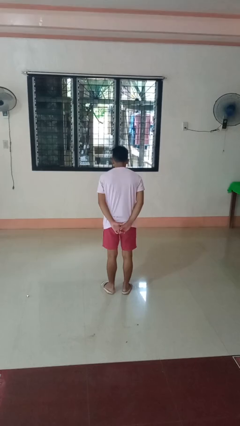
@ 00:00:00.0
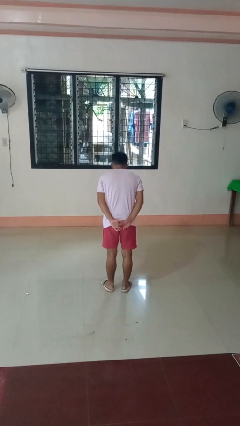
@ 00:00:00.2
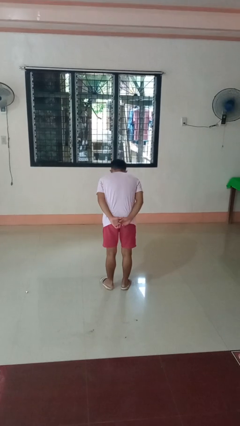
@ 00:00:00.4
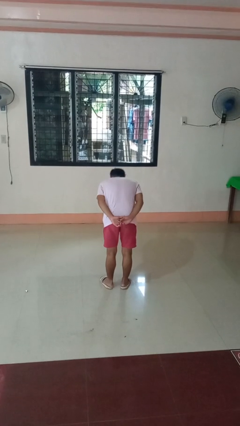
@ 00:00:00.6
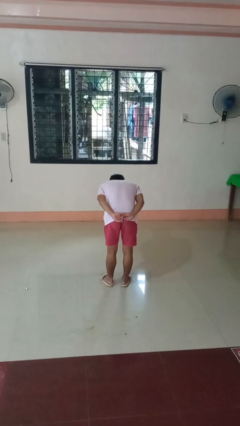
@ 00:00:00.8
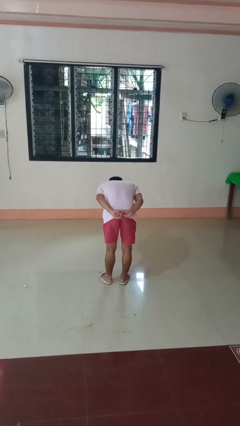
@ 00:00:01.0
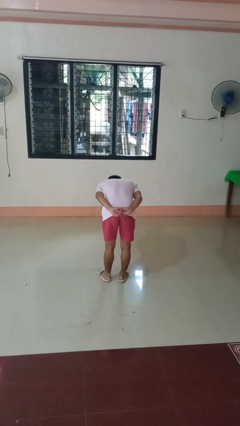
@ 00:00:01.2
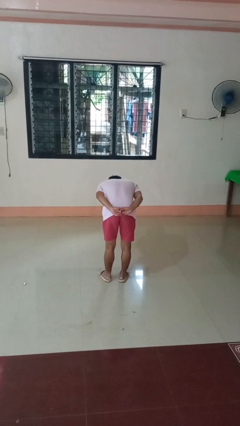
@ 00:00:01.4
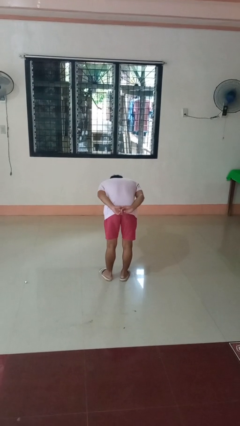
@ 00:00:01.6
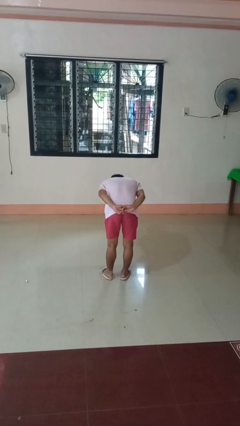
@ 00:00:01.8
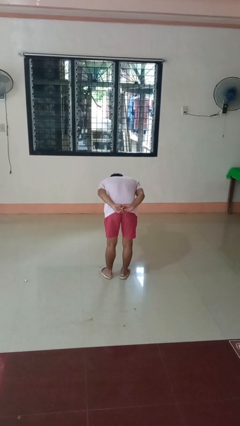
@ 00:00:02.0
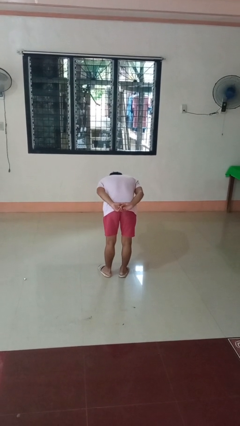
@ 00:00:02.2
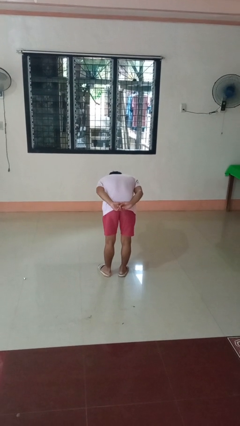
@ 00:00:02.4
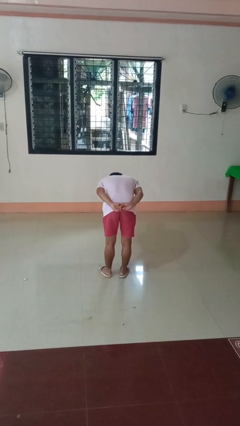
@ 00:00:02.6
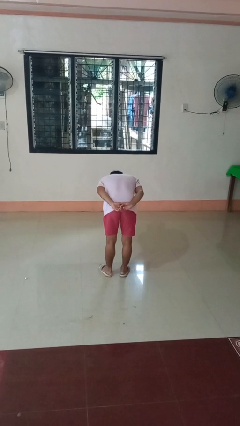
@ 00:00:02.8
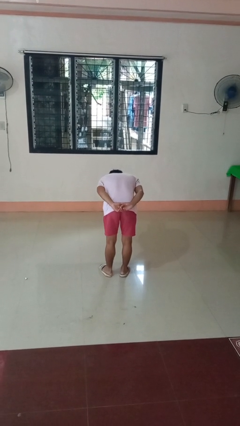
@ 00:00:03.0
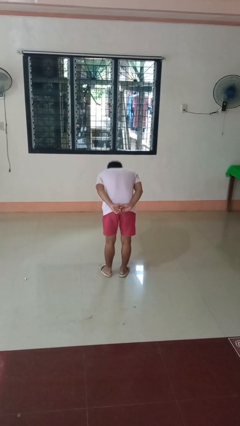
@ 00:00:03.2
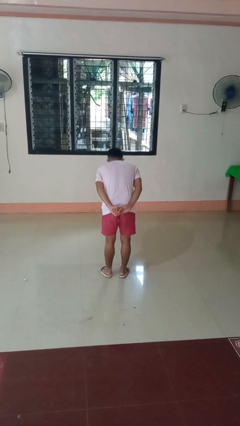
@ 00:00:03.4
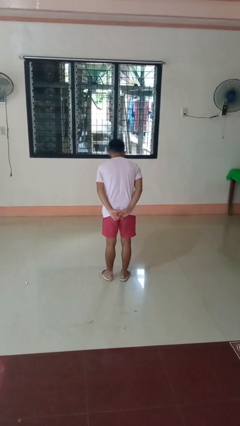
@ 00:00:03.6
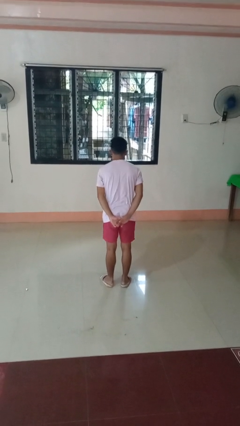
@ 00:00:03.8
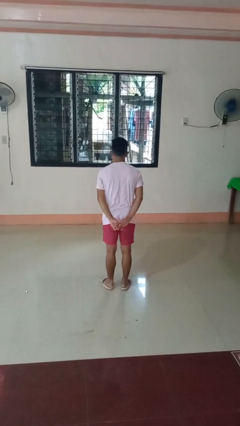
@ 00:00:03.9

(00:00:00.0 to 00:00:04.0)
person bows

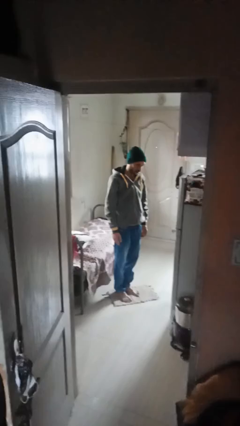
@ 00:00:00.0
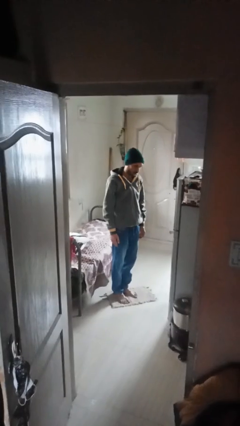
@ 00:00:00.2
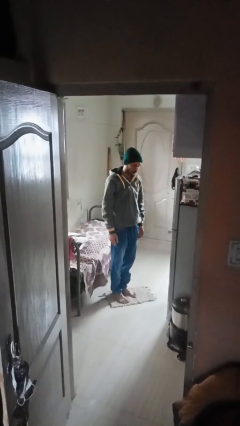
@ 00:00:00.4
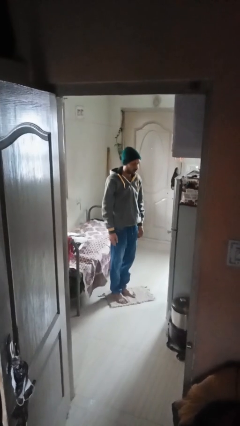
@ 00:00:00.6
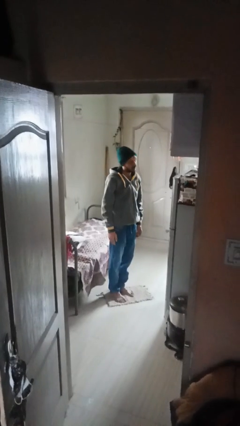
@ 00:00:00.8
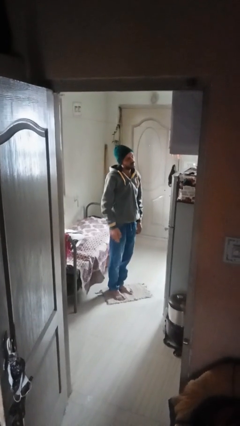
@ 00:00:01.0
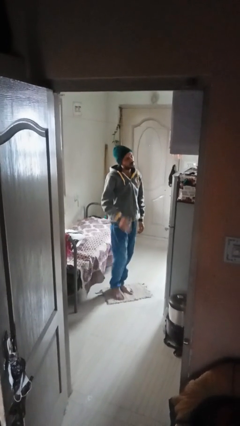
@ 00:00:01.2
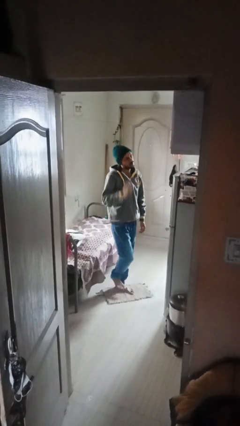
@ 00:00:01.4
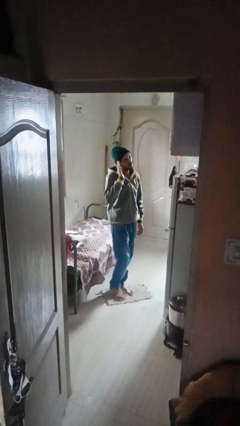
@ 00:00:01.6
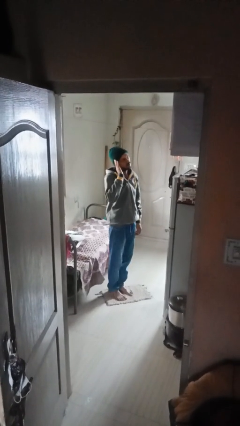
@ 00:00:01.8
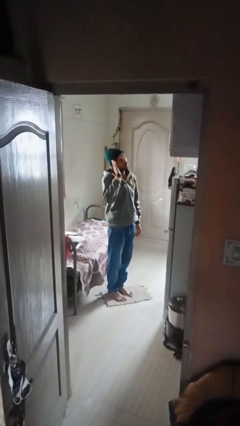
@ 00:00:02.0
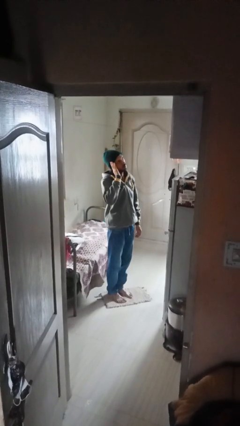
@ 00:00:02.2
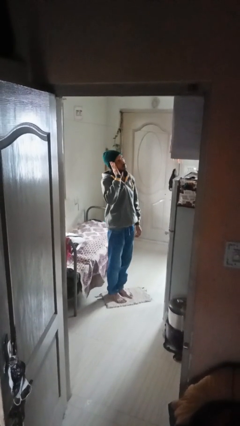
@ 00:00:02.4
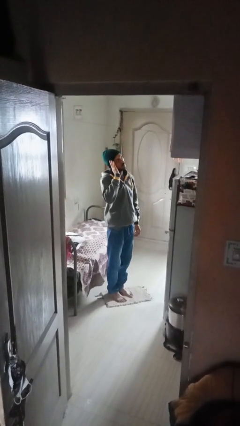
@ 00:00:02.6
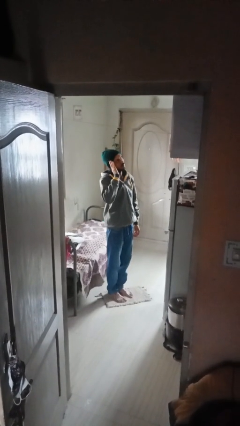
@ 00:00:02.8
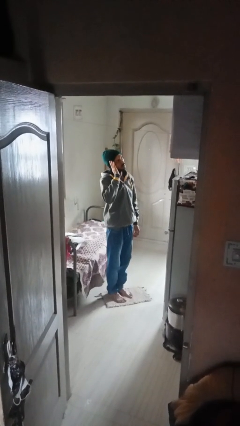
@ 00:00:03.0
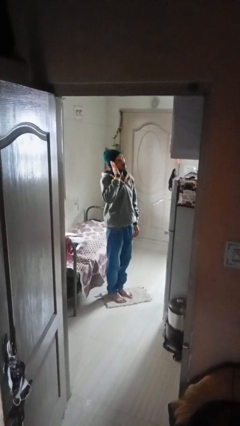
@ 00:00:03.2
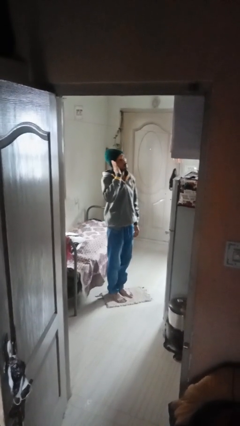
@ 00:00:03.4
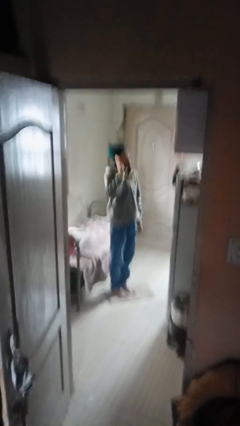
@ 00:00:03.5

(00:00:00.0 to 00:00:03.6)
person salutes

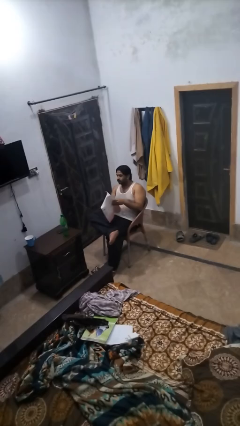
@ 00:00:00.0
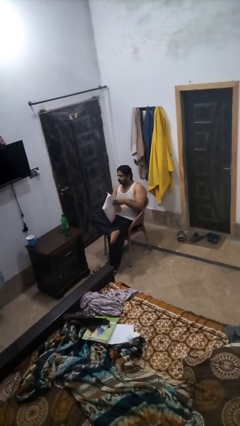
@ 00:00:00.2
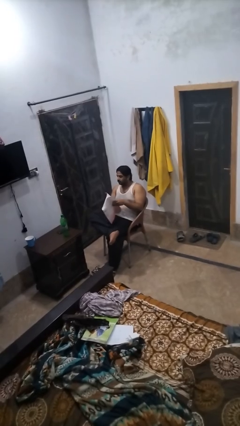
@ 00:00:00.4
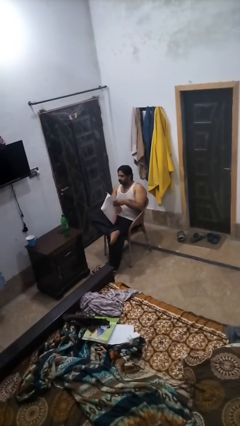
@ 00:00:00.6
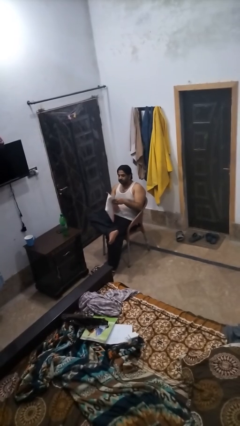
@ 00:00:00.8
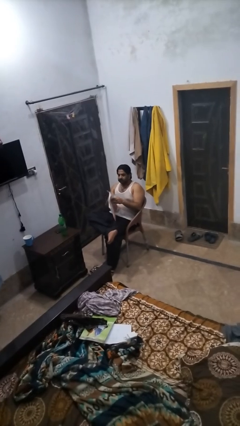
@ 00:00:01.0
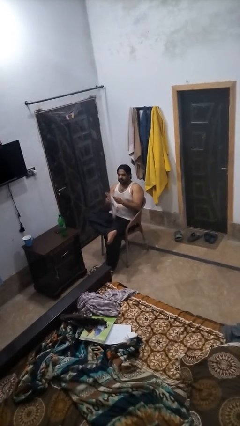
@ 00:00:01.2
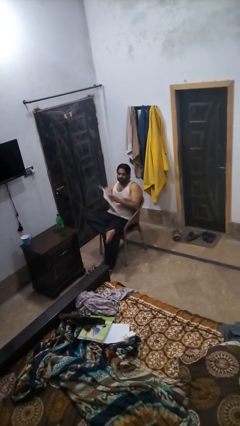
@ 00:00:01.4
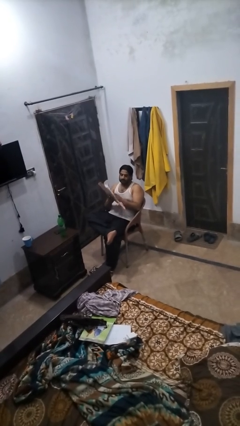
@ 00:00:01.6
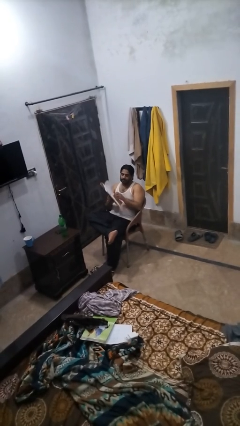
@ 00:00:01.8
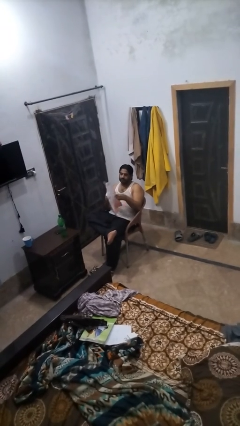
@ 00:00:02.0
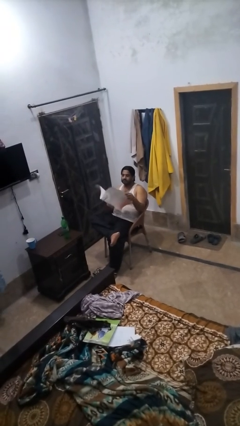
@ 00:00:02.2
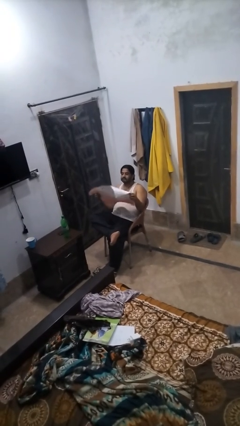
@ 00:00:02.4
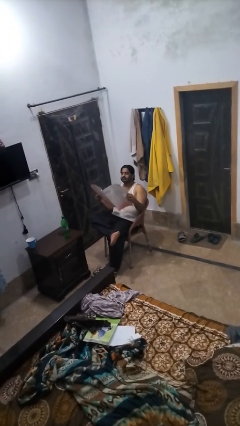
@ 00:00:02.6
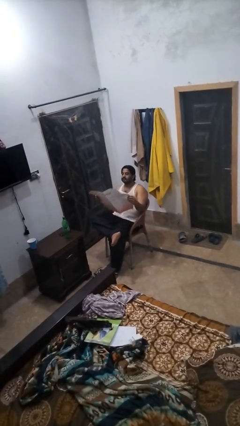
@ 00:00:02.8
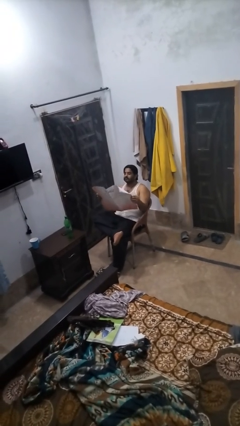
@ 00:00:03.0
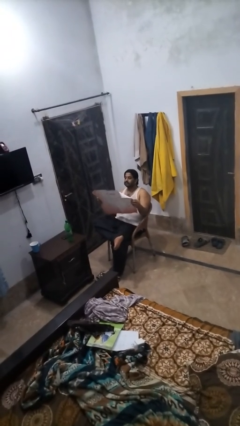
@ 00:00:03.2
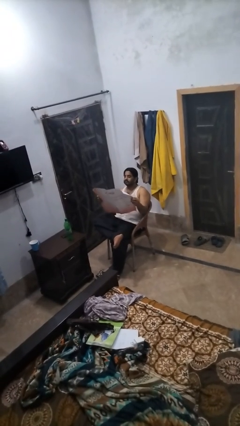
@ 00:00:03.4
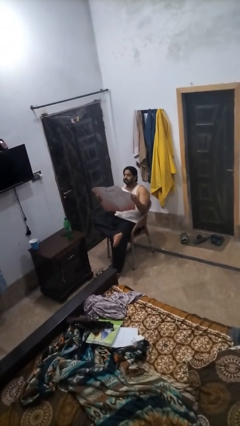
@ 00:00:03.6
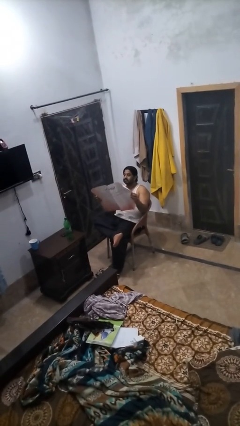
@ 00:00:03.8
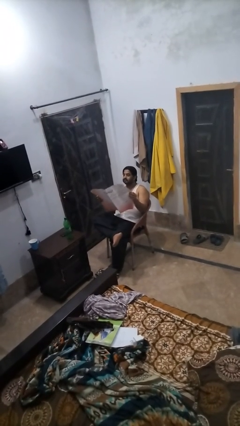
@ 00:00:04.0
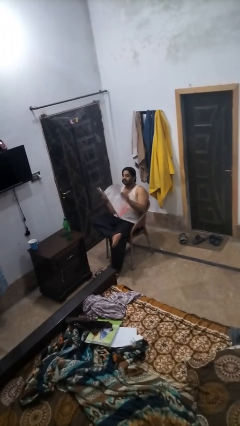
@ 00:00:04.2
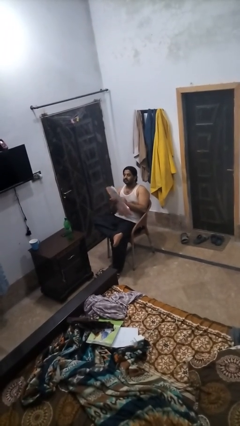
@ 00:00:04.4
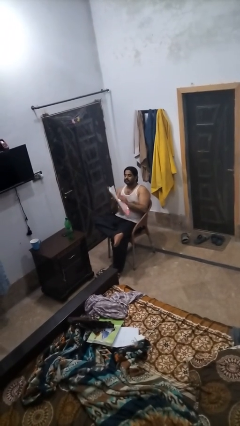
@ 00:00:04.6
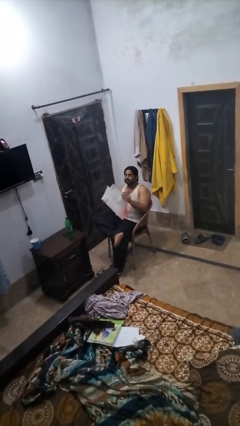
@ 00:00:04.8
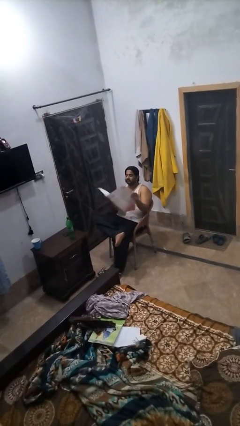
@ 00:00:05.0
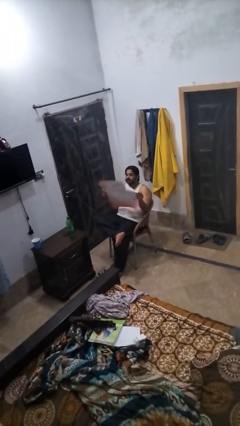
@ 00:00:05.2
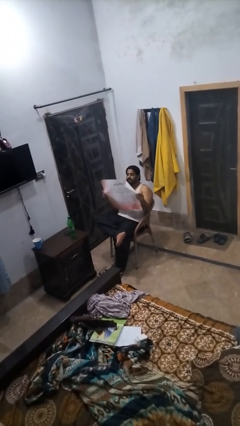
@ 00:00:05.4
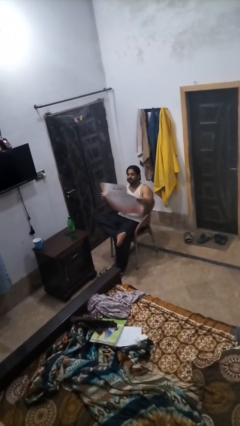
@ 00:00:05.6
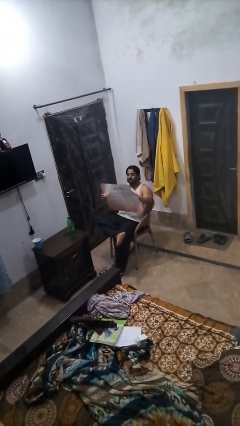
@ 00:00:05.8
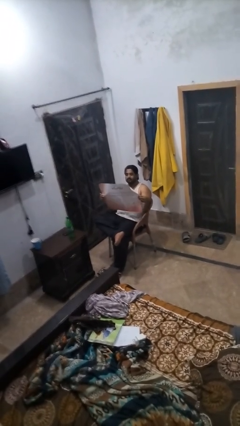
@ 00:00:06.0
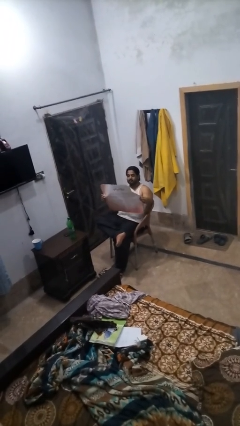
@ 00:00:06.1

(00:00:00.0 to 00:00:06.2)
person reads newspaper

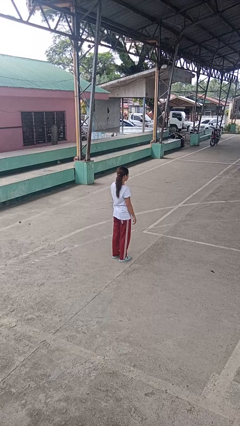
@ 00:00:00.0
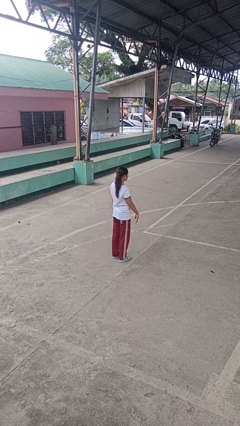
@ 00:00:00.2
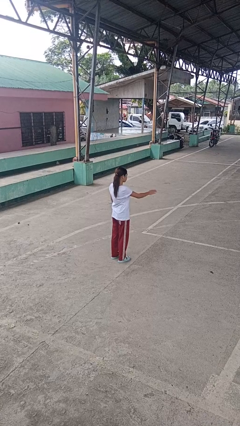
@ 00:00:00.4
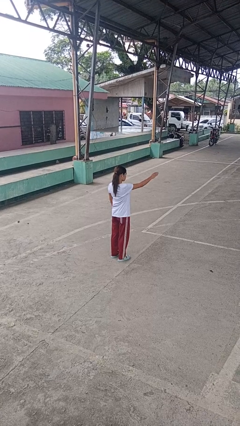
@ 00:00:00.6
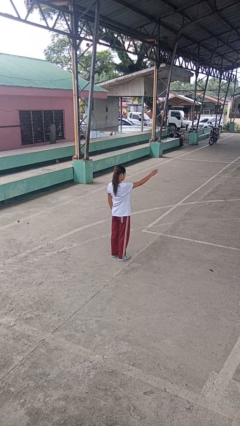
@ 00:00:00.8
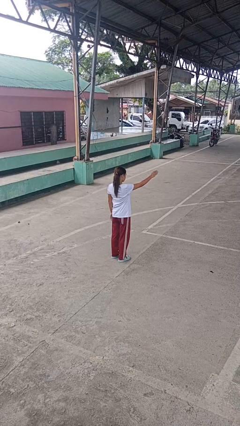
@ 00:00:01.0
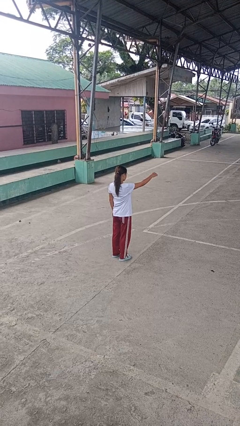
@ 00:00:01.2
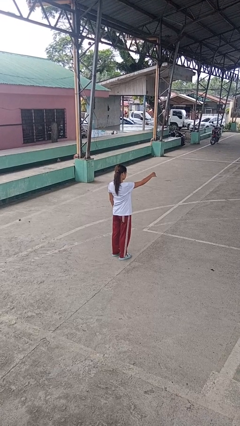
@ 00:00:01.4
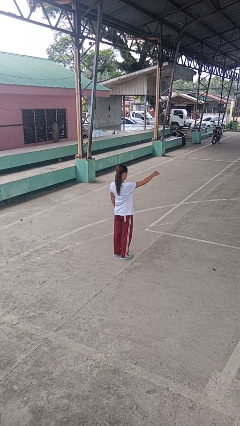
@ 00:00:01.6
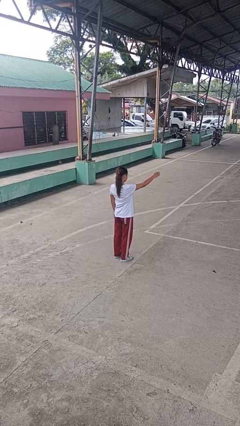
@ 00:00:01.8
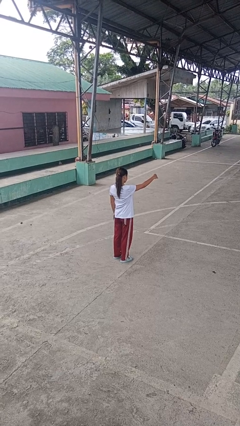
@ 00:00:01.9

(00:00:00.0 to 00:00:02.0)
person gestures come here

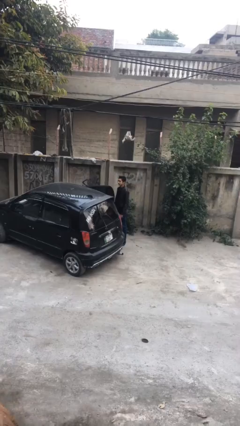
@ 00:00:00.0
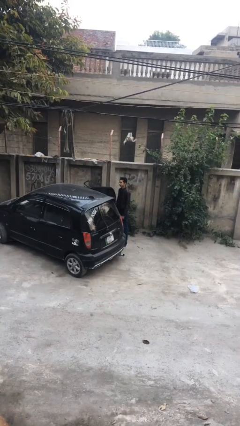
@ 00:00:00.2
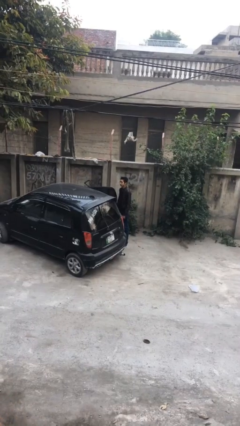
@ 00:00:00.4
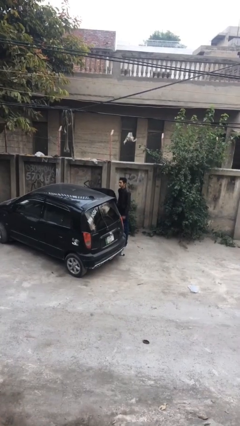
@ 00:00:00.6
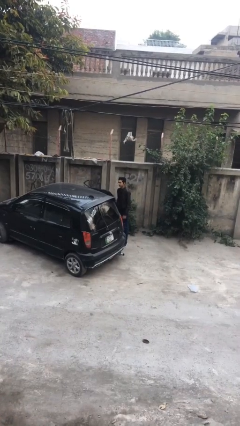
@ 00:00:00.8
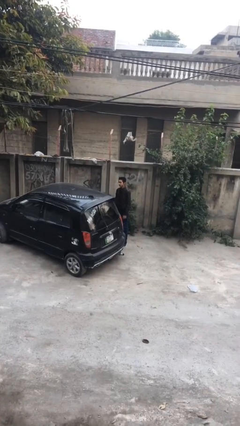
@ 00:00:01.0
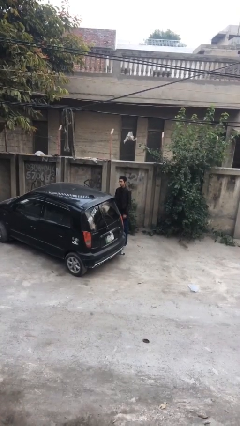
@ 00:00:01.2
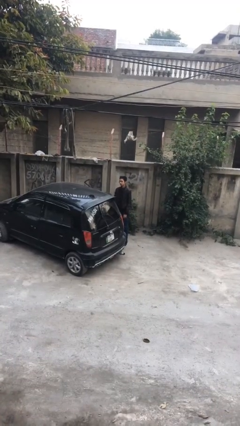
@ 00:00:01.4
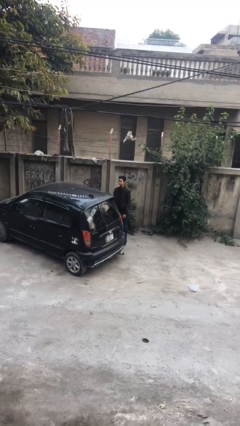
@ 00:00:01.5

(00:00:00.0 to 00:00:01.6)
person closes car door
